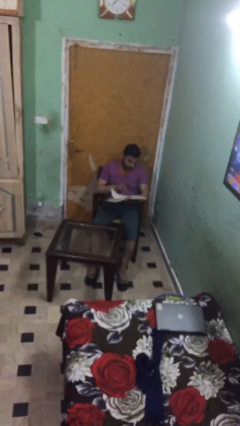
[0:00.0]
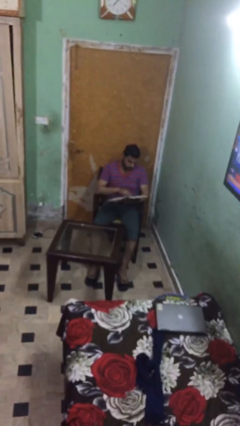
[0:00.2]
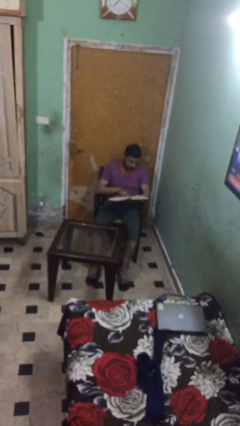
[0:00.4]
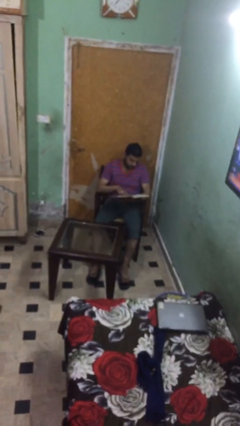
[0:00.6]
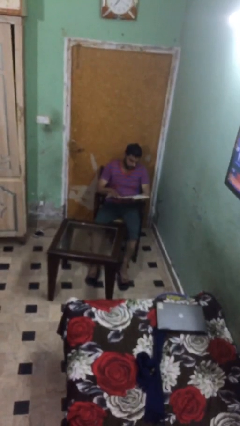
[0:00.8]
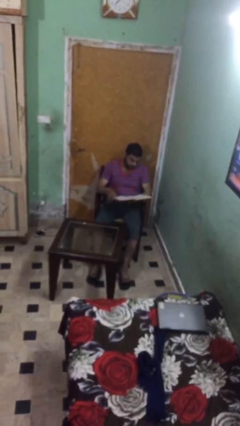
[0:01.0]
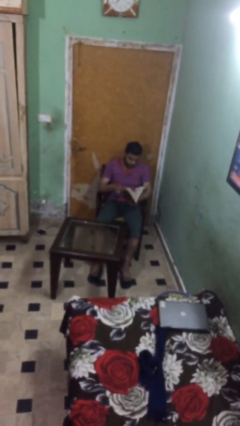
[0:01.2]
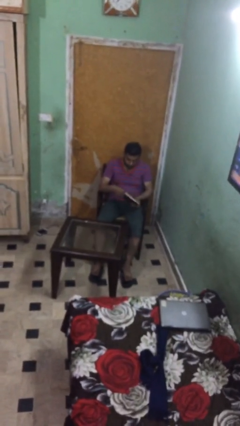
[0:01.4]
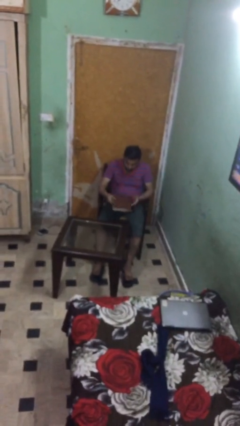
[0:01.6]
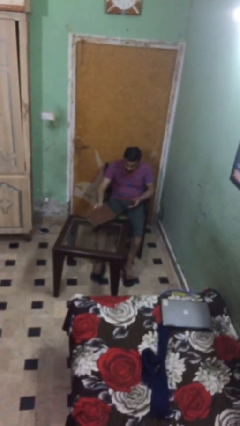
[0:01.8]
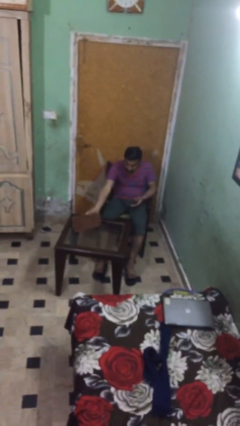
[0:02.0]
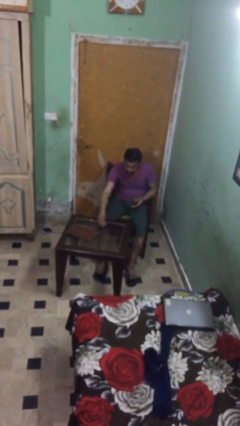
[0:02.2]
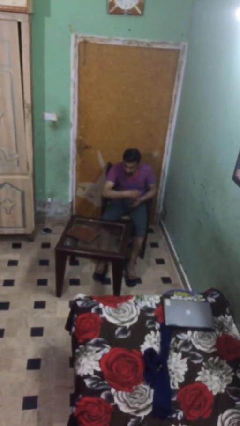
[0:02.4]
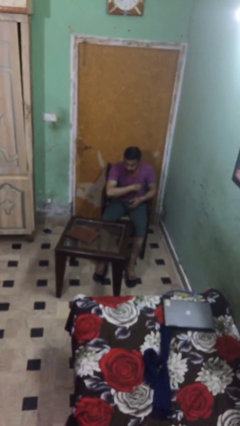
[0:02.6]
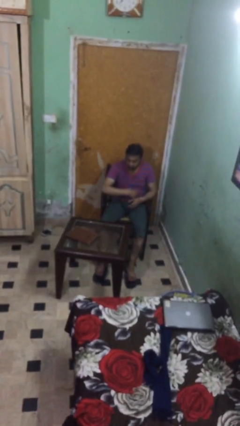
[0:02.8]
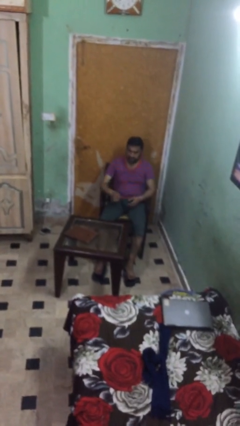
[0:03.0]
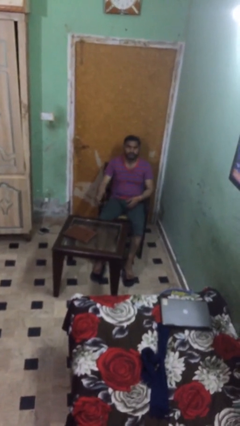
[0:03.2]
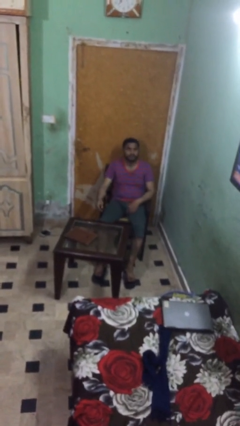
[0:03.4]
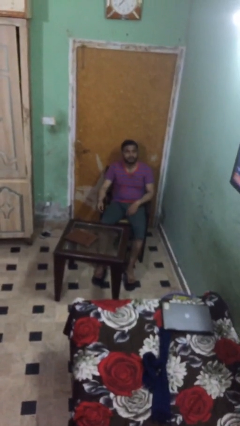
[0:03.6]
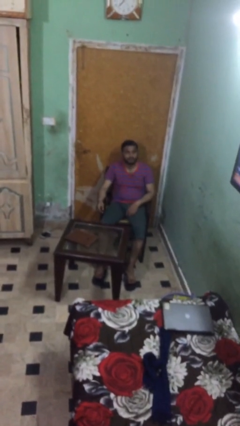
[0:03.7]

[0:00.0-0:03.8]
person puts down object on table

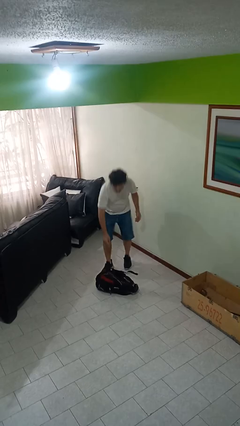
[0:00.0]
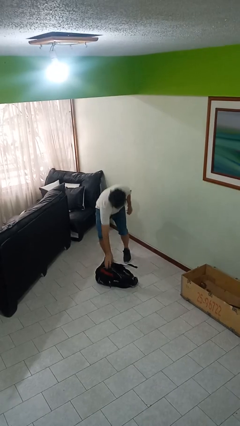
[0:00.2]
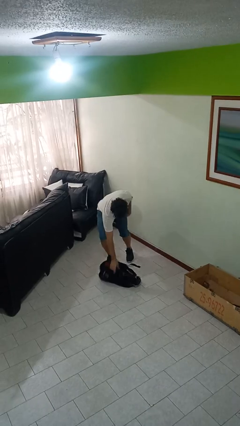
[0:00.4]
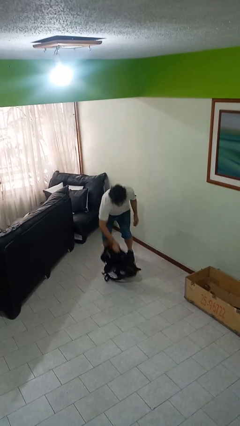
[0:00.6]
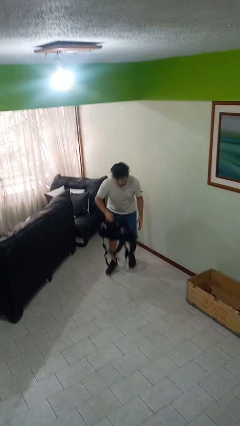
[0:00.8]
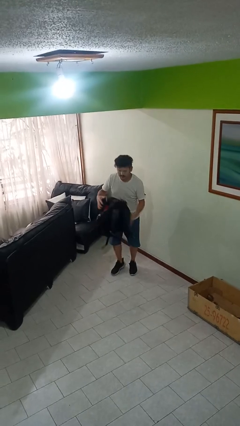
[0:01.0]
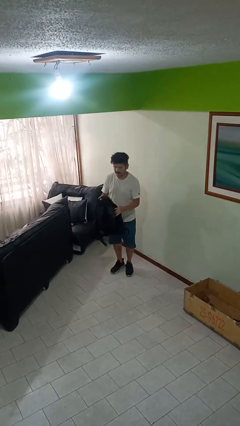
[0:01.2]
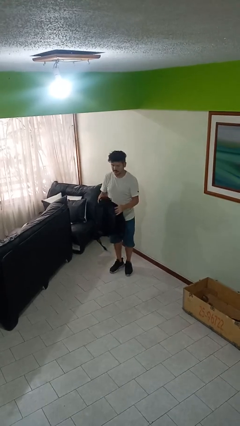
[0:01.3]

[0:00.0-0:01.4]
person picks up object from floor

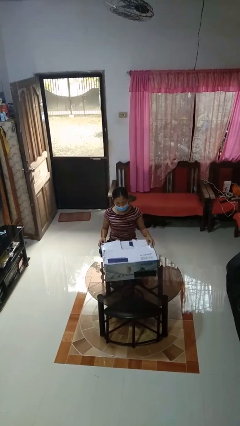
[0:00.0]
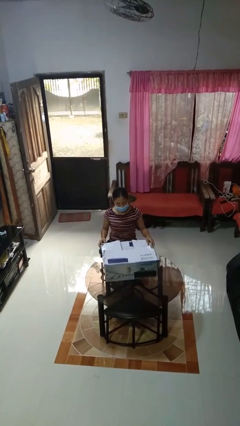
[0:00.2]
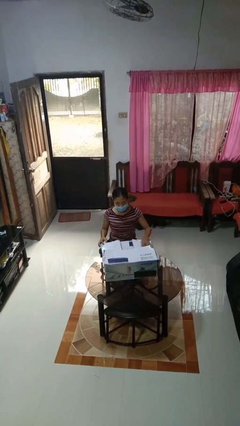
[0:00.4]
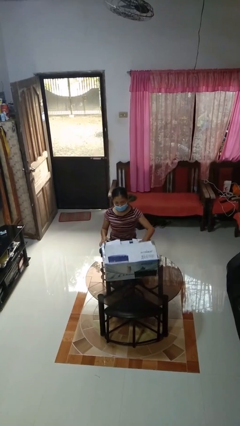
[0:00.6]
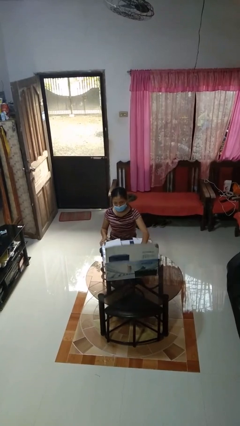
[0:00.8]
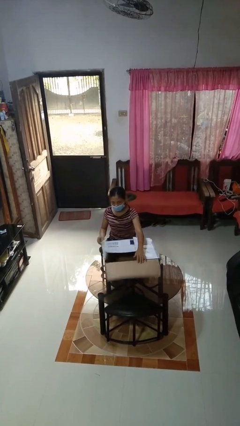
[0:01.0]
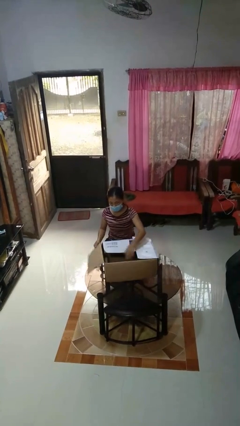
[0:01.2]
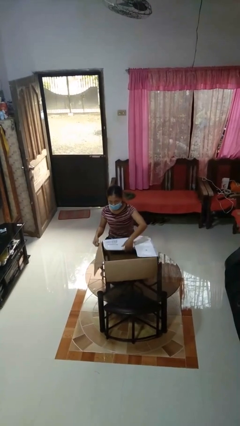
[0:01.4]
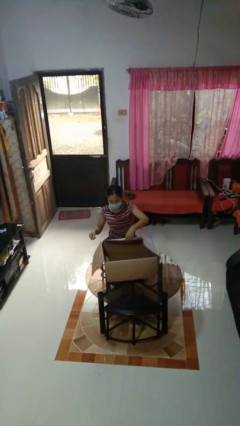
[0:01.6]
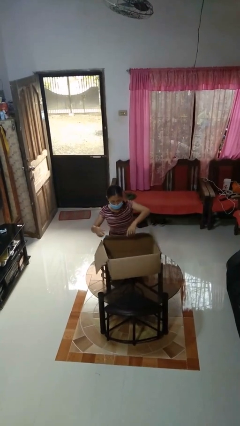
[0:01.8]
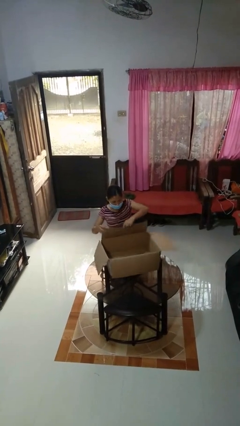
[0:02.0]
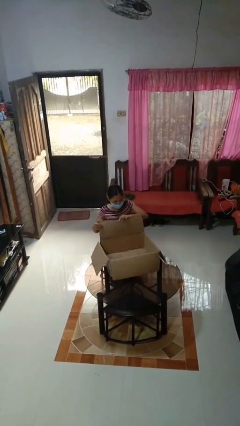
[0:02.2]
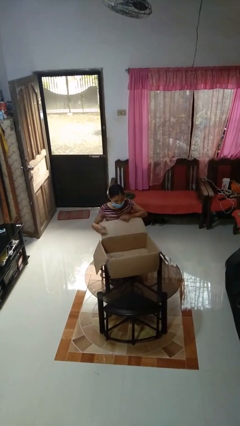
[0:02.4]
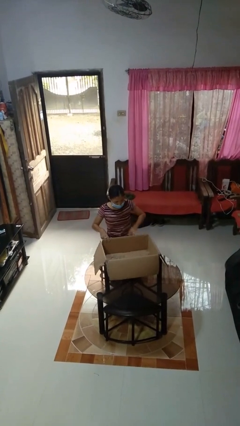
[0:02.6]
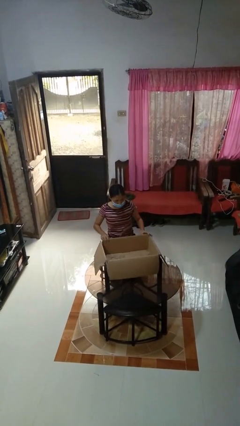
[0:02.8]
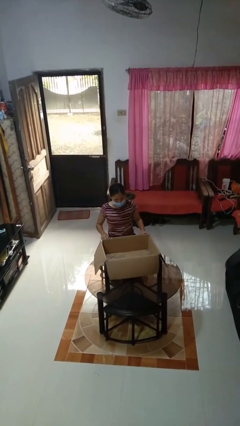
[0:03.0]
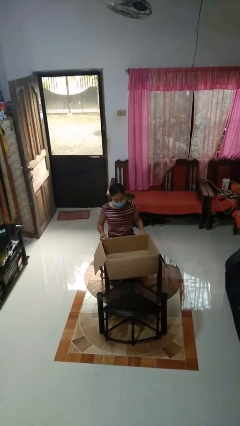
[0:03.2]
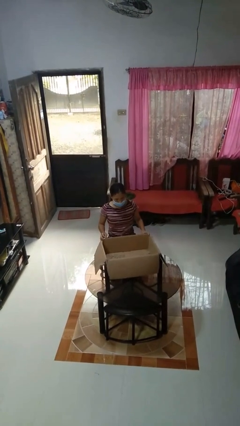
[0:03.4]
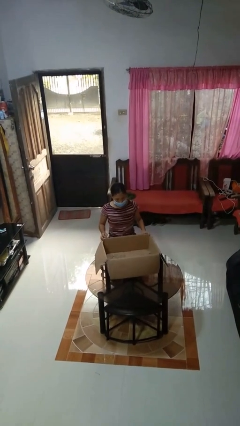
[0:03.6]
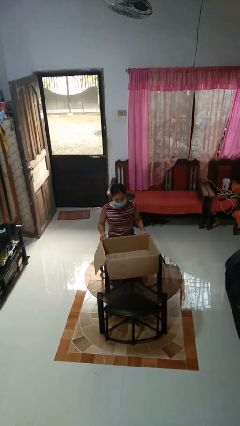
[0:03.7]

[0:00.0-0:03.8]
person opens box

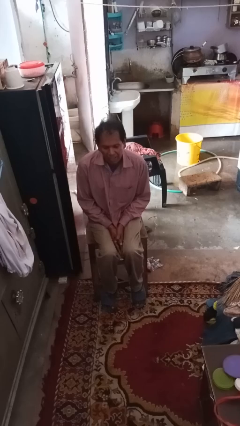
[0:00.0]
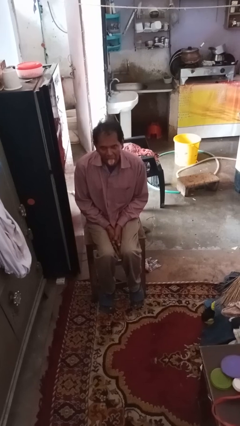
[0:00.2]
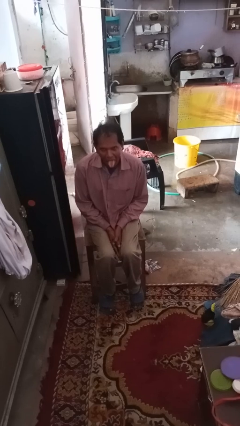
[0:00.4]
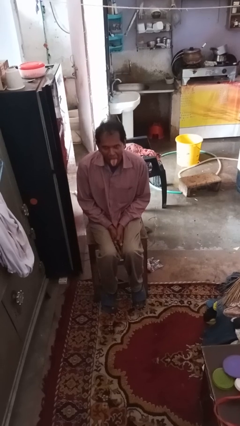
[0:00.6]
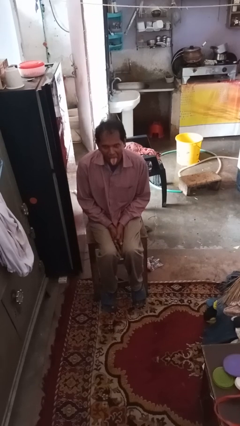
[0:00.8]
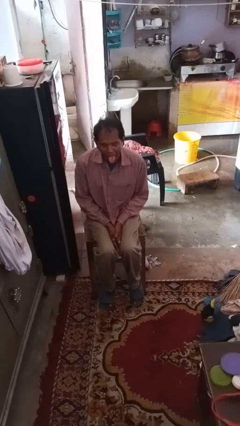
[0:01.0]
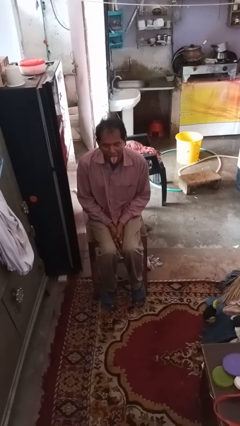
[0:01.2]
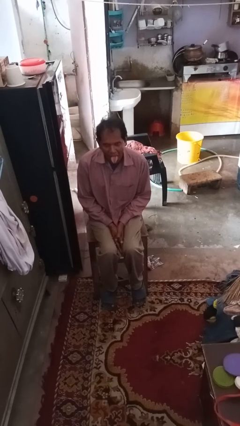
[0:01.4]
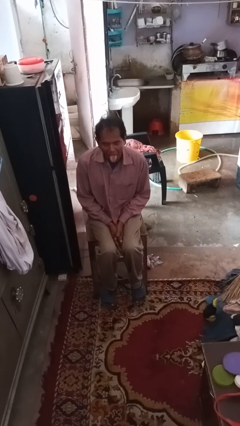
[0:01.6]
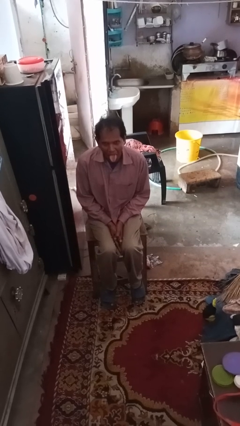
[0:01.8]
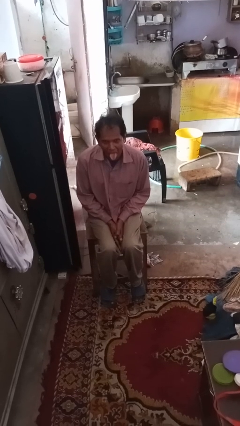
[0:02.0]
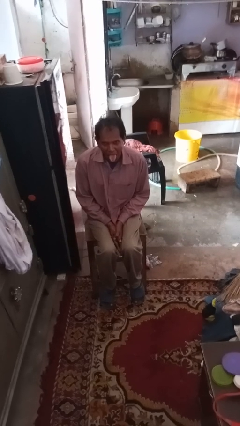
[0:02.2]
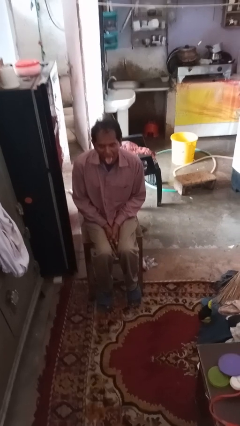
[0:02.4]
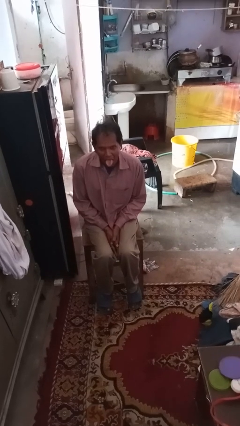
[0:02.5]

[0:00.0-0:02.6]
person sticks out tongue

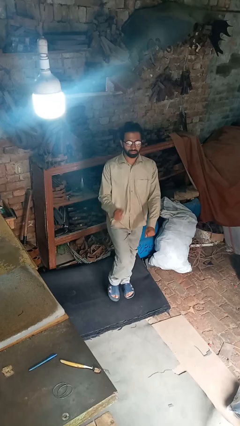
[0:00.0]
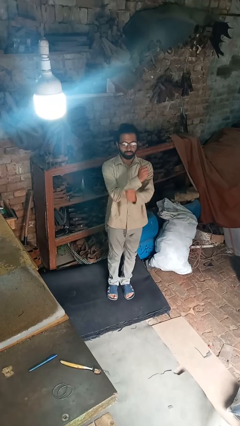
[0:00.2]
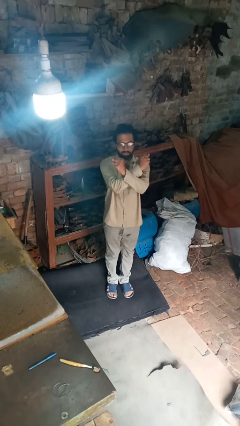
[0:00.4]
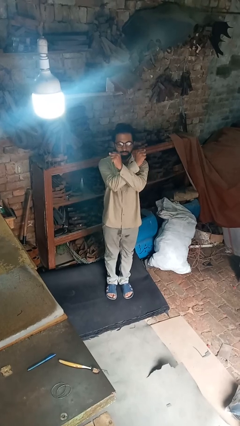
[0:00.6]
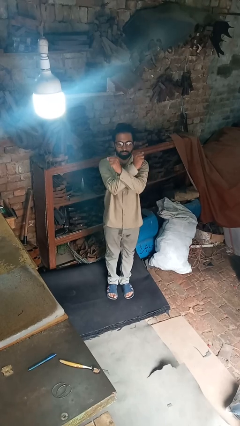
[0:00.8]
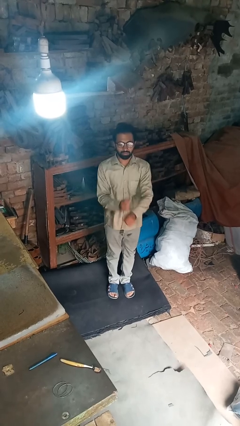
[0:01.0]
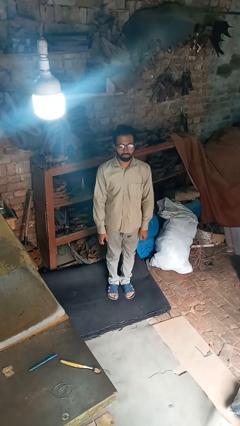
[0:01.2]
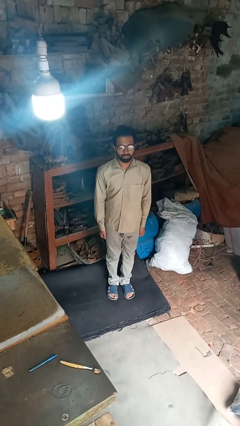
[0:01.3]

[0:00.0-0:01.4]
person karate chop

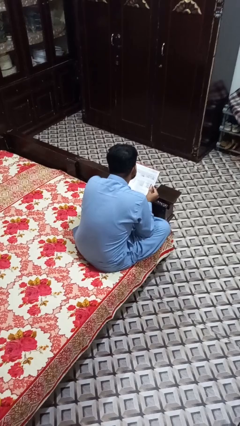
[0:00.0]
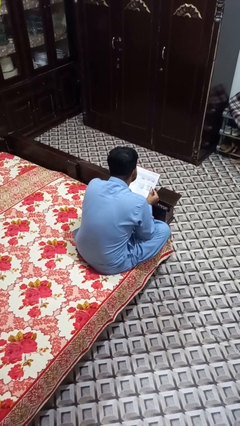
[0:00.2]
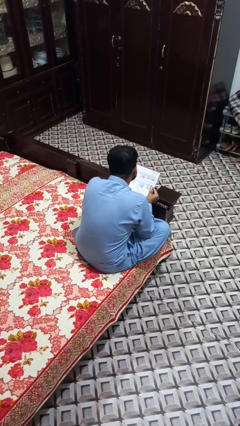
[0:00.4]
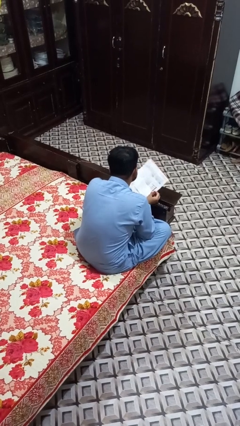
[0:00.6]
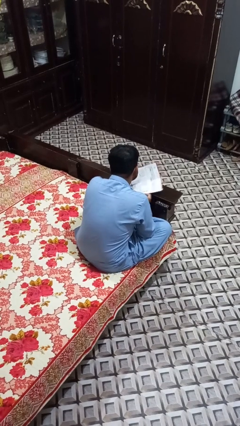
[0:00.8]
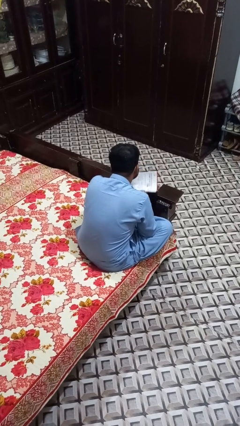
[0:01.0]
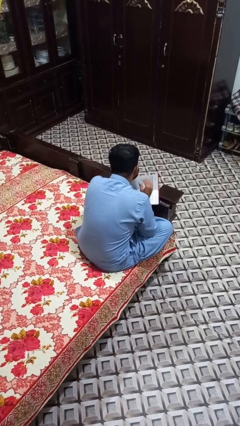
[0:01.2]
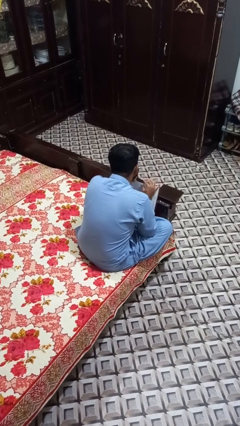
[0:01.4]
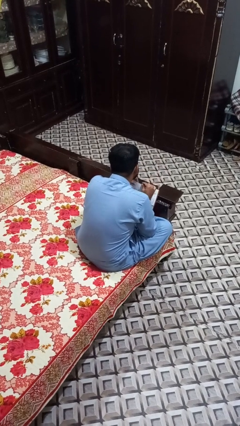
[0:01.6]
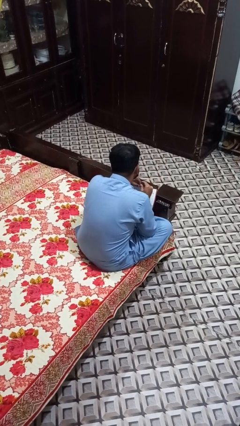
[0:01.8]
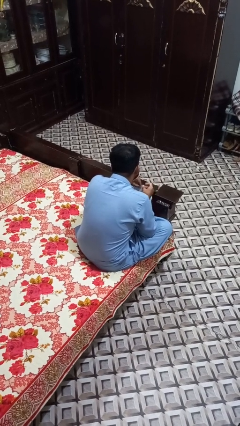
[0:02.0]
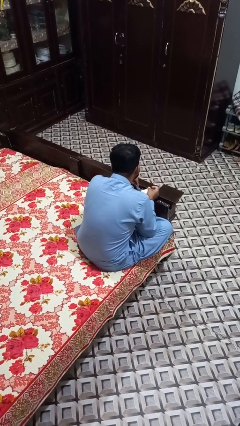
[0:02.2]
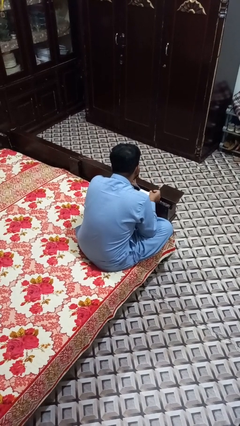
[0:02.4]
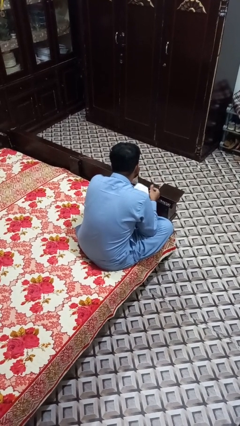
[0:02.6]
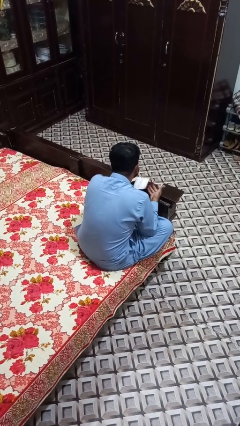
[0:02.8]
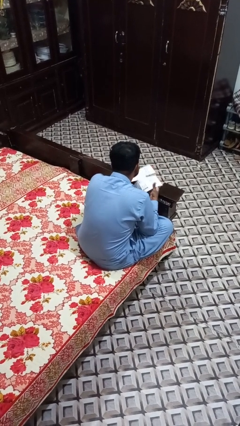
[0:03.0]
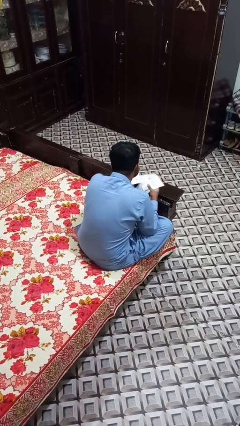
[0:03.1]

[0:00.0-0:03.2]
person tears paper

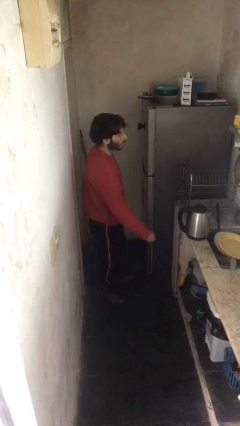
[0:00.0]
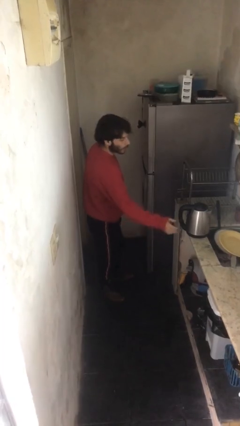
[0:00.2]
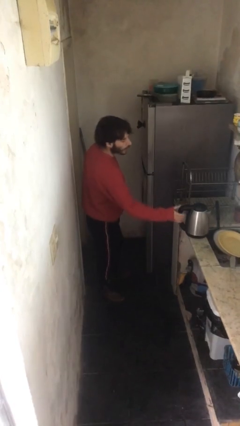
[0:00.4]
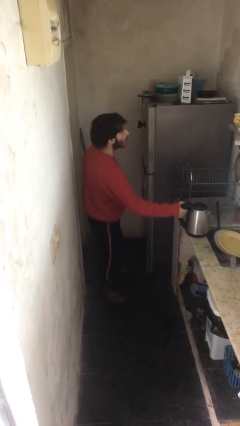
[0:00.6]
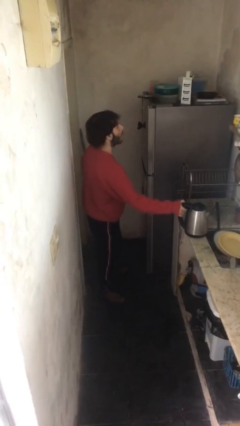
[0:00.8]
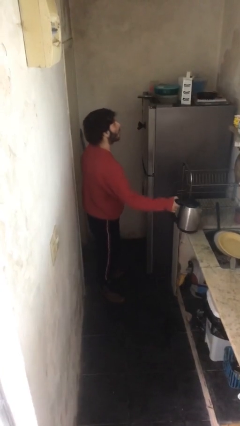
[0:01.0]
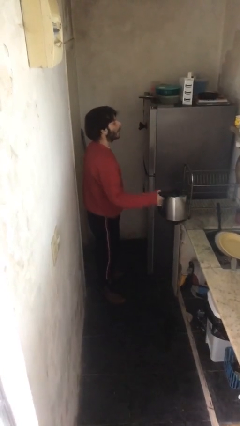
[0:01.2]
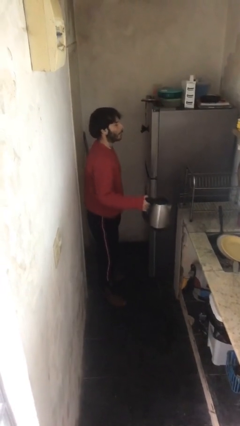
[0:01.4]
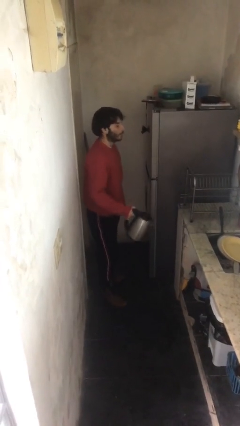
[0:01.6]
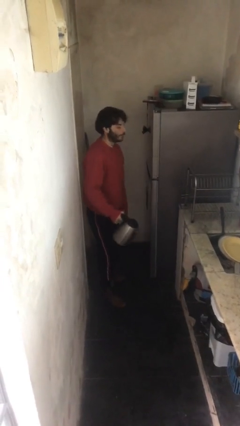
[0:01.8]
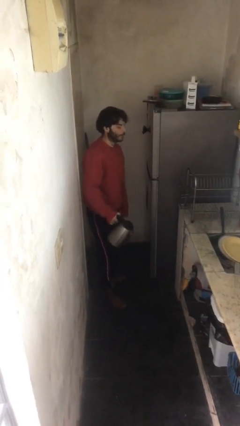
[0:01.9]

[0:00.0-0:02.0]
person picks up object from countertop
